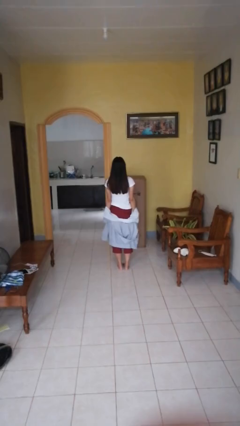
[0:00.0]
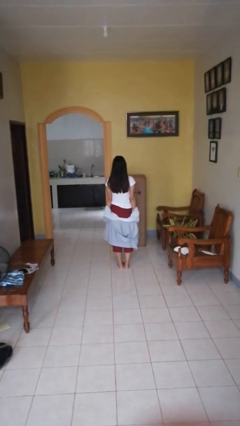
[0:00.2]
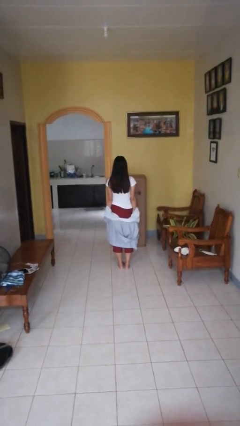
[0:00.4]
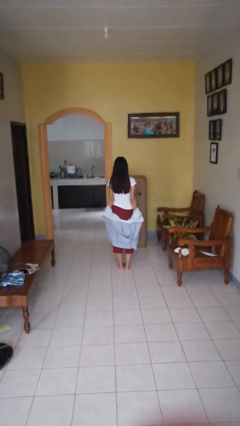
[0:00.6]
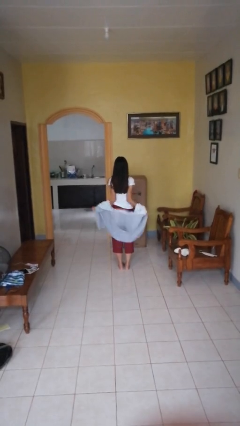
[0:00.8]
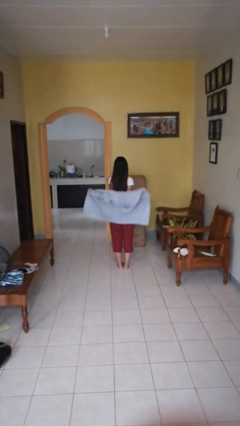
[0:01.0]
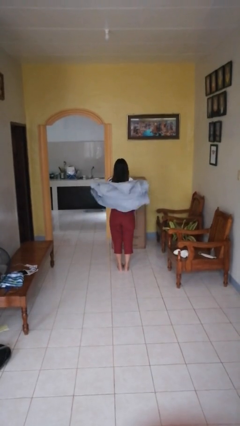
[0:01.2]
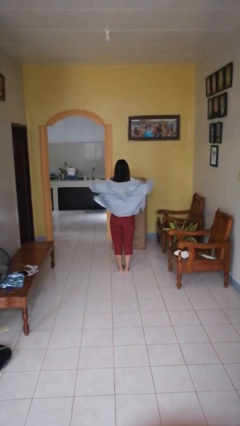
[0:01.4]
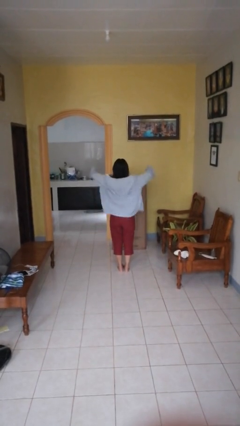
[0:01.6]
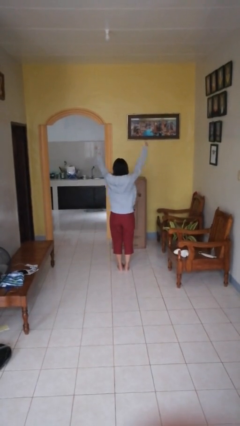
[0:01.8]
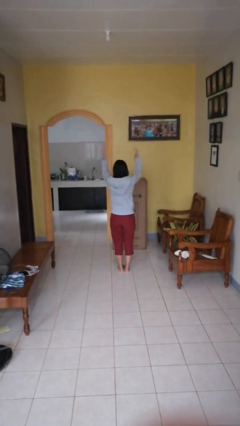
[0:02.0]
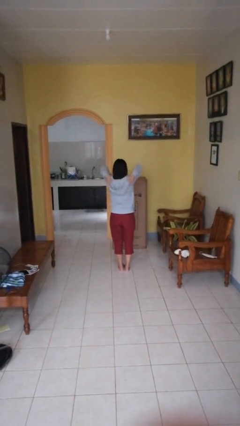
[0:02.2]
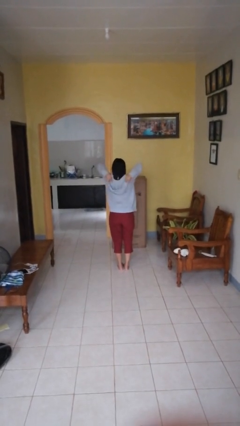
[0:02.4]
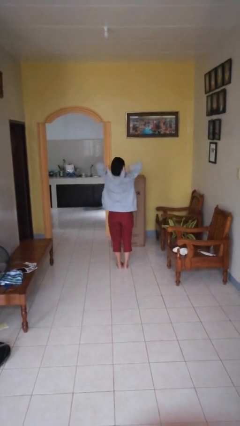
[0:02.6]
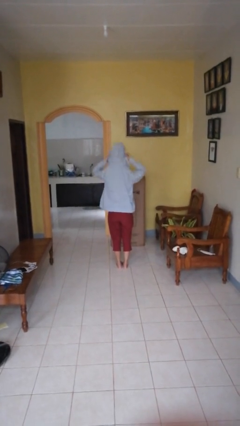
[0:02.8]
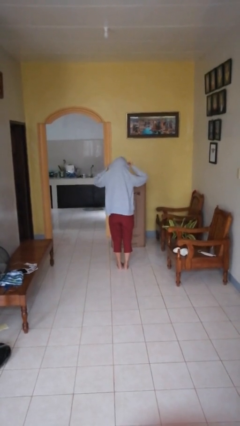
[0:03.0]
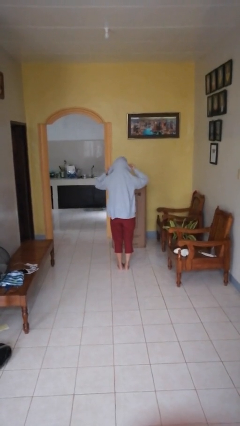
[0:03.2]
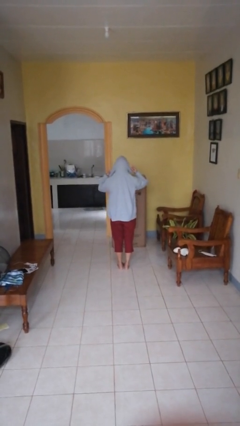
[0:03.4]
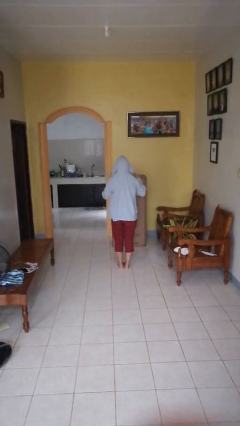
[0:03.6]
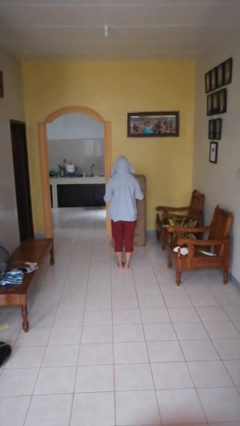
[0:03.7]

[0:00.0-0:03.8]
person puts on hoodie

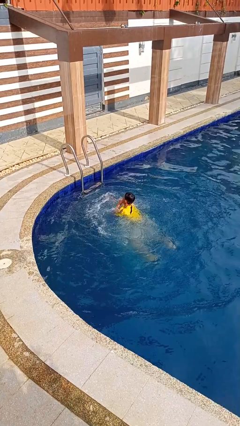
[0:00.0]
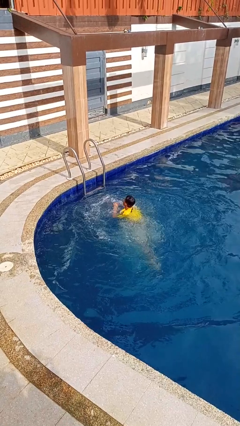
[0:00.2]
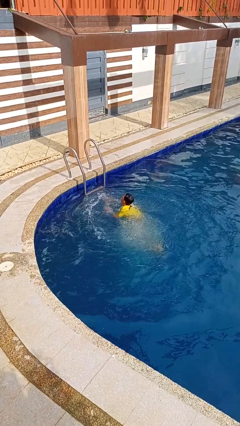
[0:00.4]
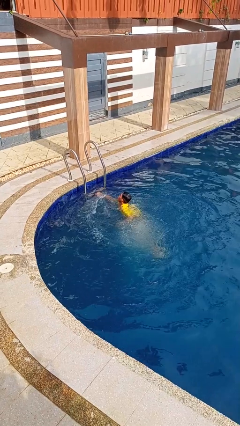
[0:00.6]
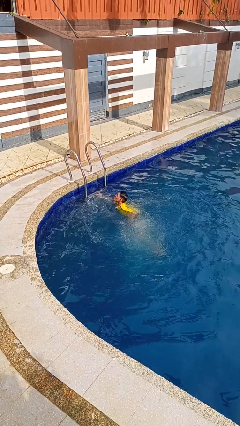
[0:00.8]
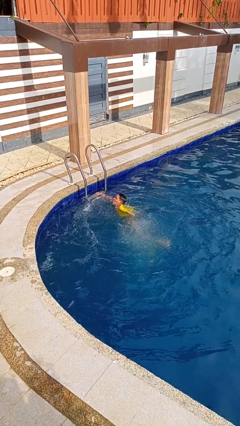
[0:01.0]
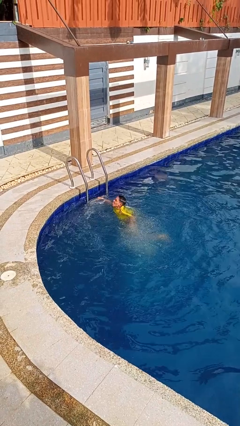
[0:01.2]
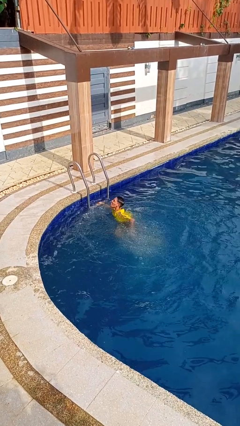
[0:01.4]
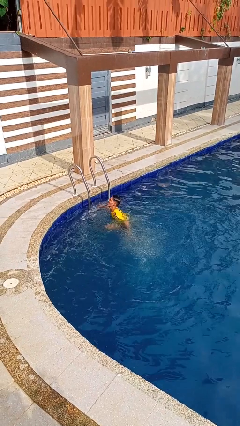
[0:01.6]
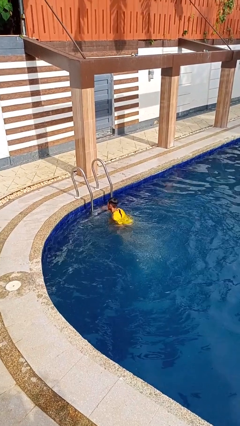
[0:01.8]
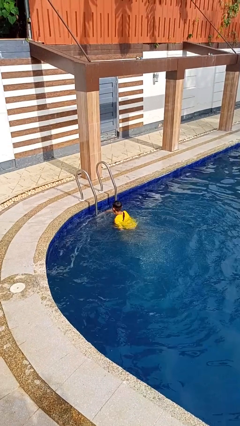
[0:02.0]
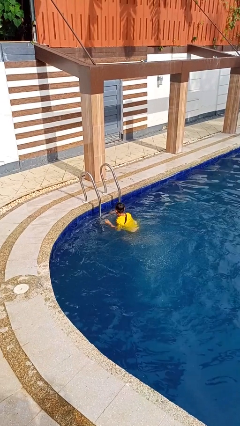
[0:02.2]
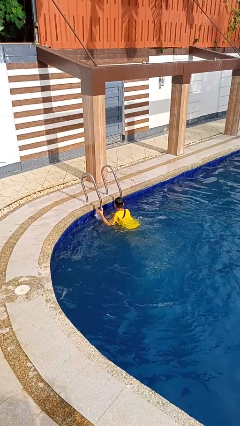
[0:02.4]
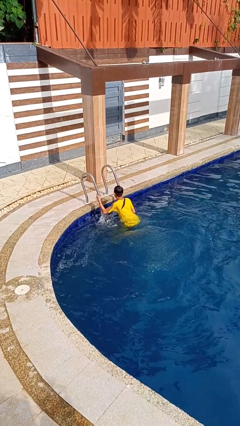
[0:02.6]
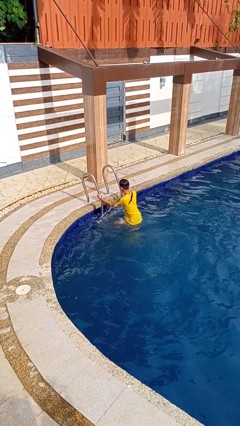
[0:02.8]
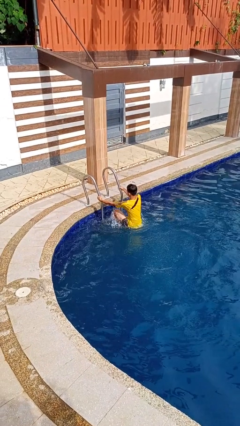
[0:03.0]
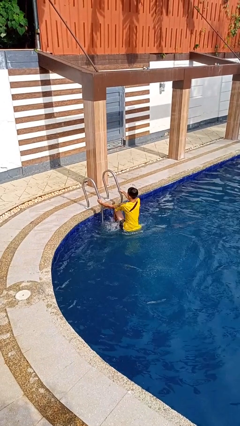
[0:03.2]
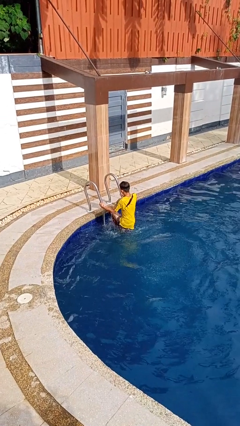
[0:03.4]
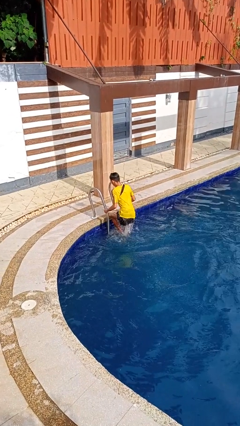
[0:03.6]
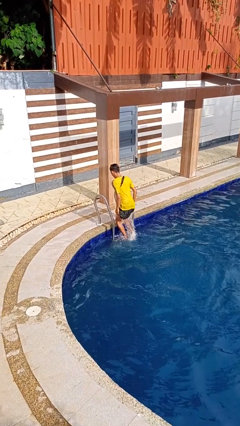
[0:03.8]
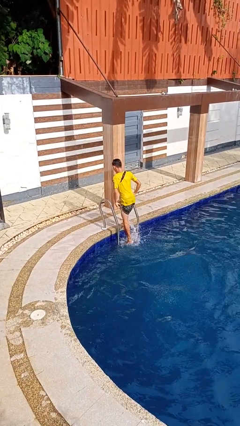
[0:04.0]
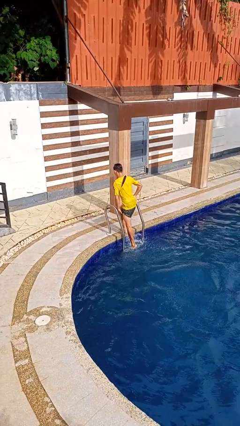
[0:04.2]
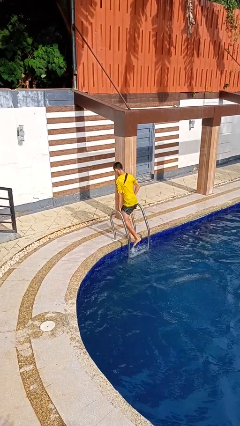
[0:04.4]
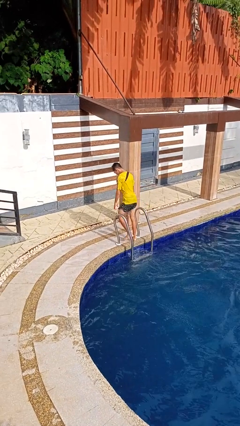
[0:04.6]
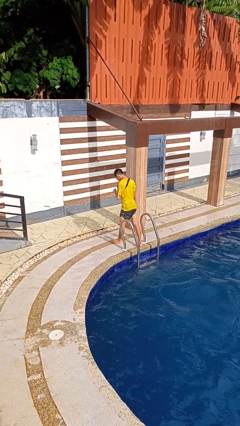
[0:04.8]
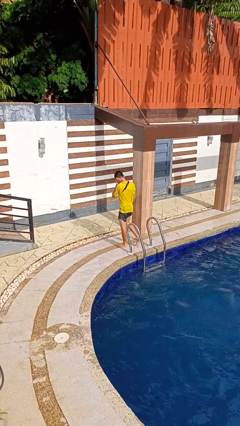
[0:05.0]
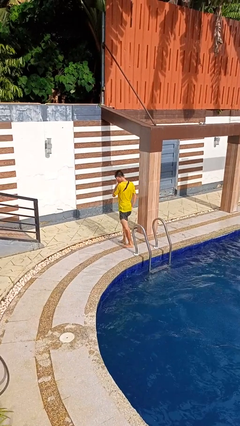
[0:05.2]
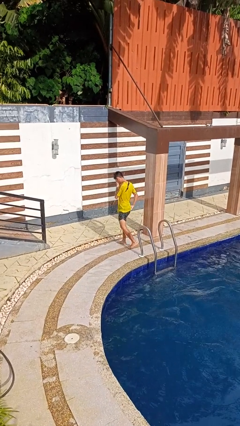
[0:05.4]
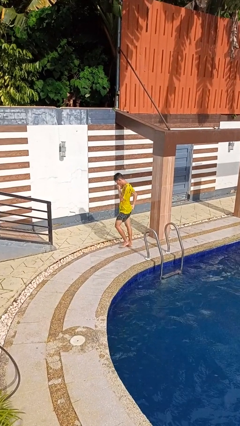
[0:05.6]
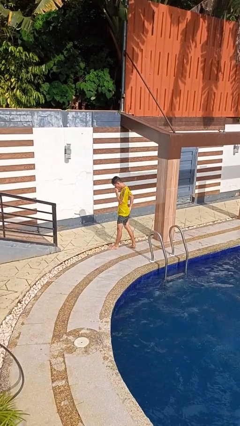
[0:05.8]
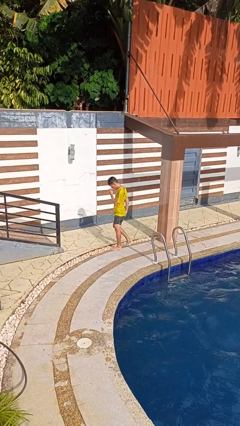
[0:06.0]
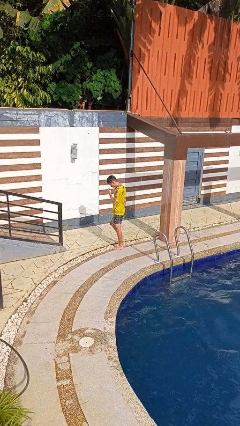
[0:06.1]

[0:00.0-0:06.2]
person exits pool

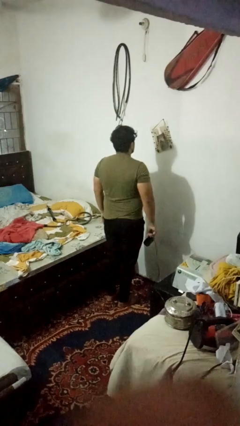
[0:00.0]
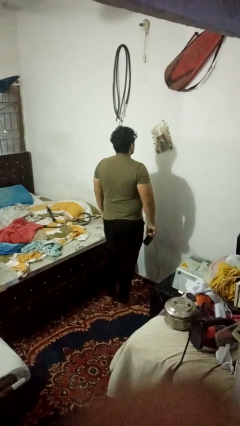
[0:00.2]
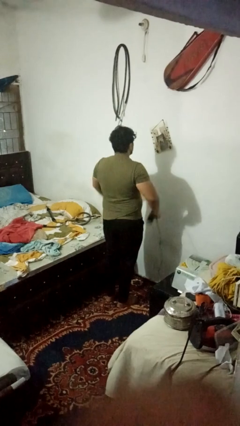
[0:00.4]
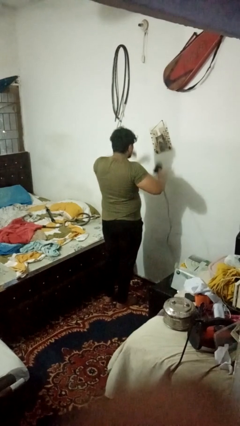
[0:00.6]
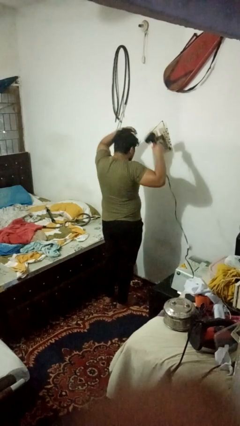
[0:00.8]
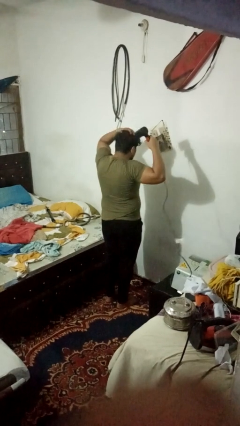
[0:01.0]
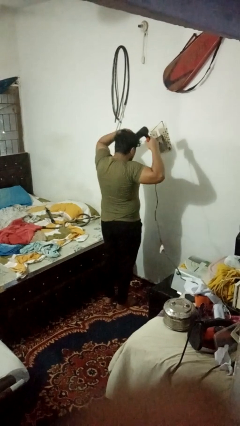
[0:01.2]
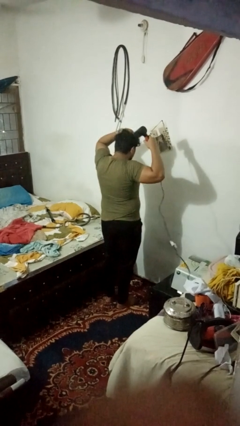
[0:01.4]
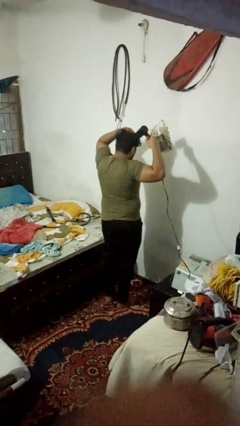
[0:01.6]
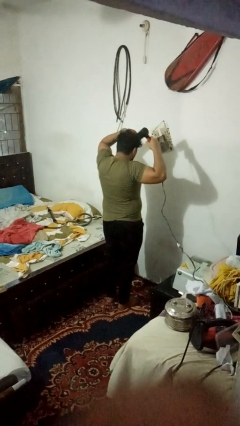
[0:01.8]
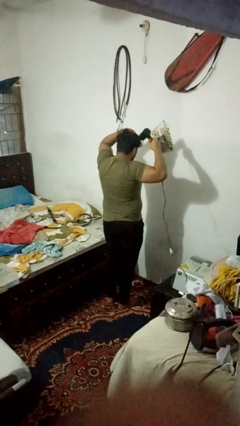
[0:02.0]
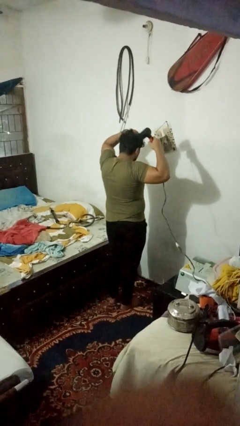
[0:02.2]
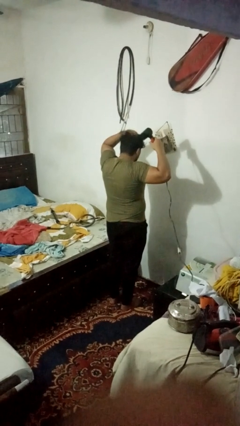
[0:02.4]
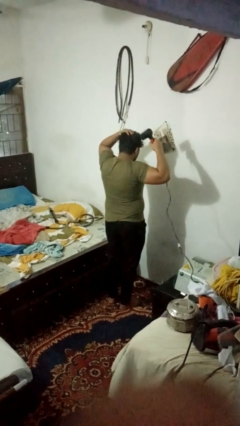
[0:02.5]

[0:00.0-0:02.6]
person dries hair with hairdryer

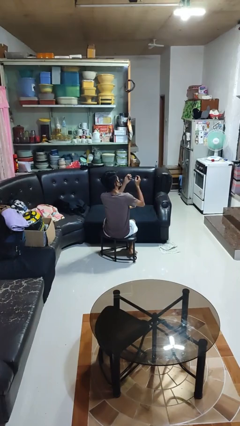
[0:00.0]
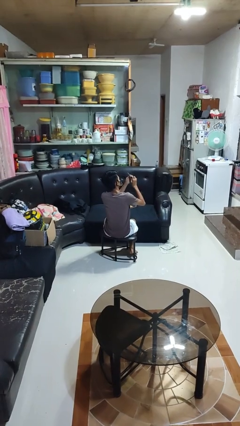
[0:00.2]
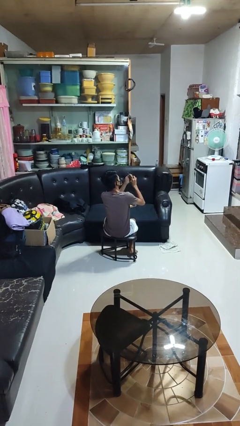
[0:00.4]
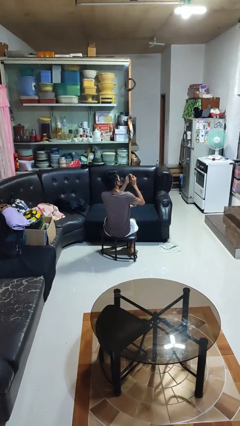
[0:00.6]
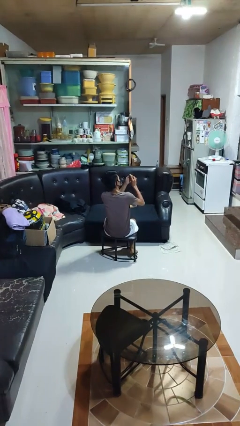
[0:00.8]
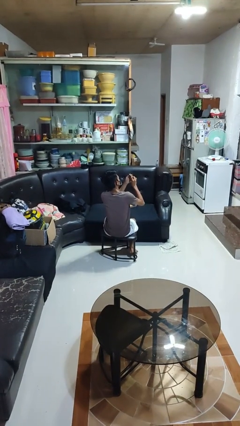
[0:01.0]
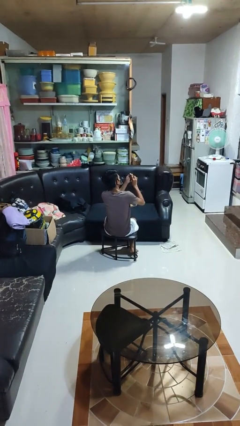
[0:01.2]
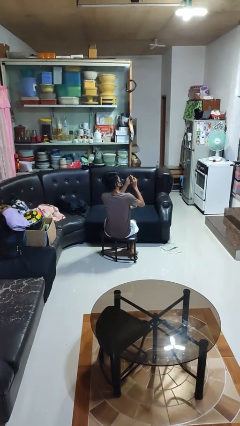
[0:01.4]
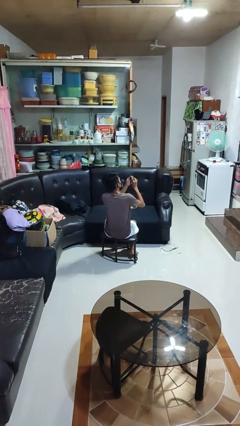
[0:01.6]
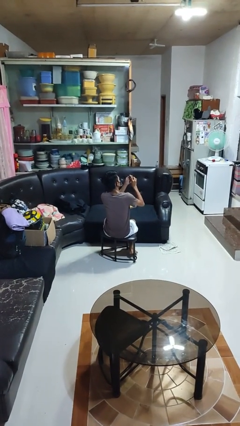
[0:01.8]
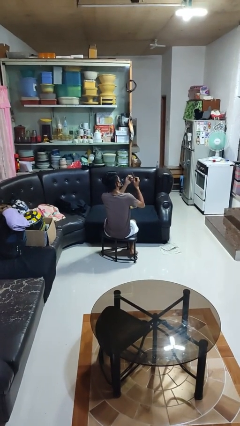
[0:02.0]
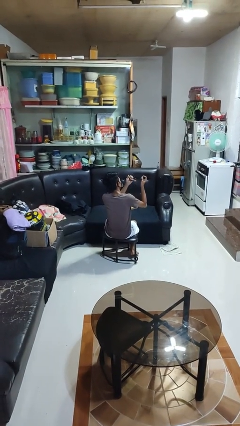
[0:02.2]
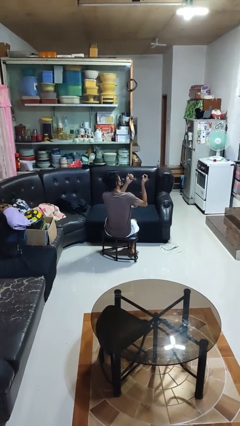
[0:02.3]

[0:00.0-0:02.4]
person files fingernails

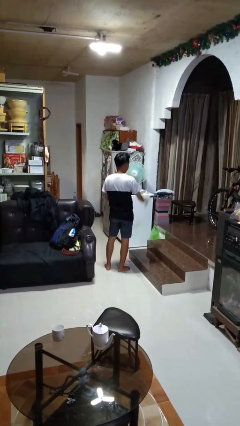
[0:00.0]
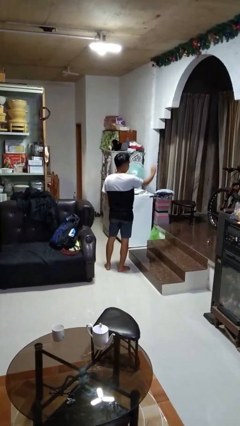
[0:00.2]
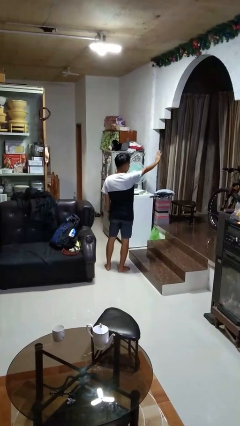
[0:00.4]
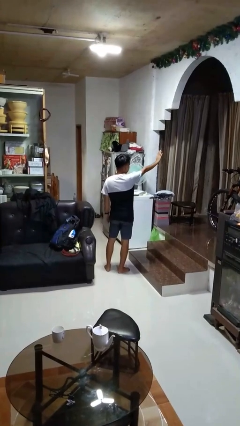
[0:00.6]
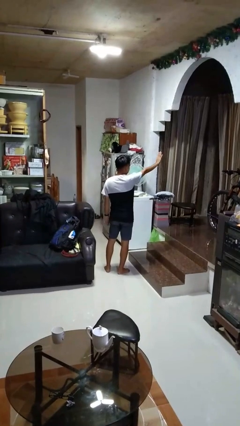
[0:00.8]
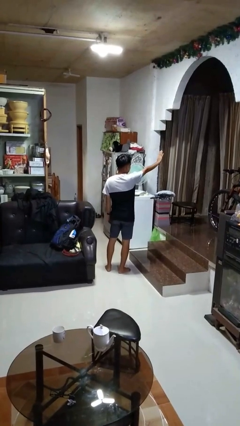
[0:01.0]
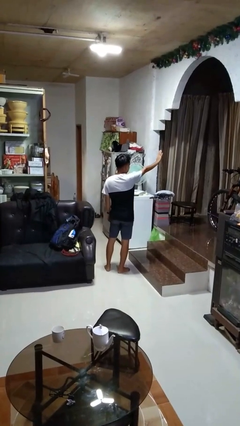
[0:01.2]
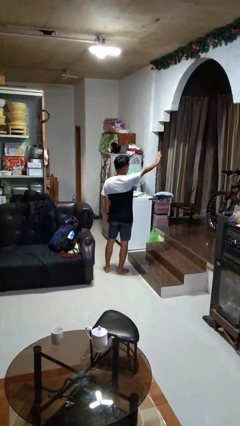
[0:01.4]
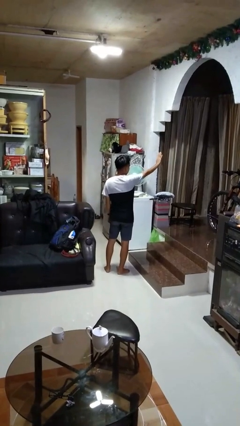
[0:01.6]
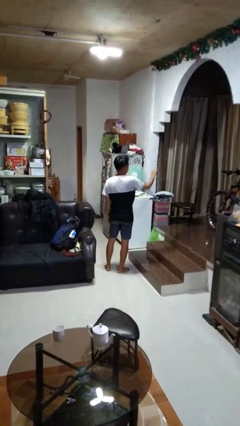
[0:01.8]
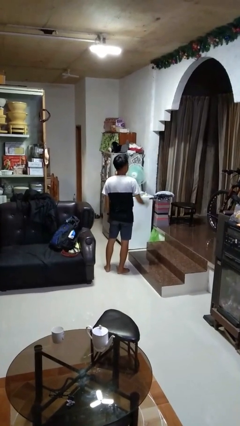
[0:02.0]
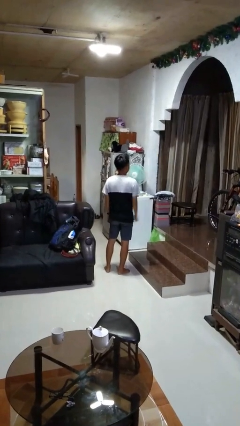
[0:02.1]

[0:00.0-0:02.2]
person gestures stop
